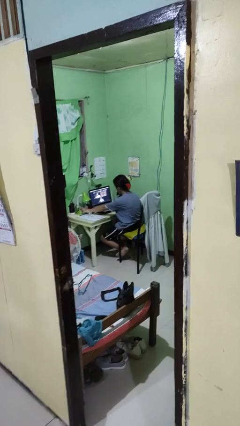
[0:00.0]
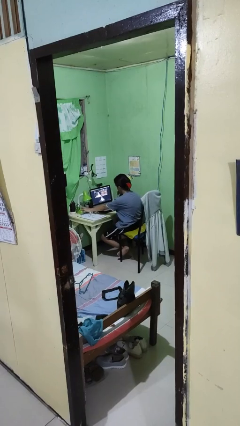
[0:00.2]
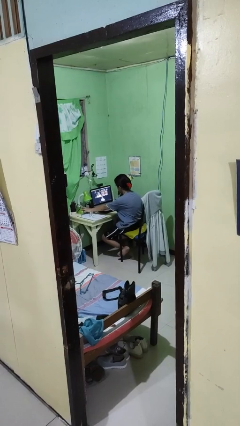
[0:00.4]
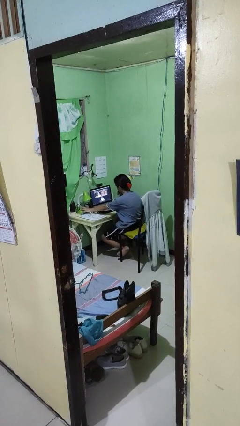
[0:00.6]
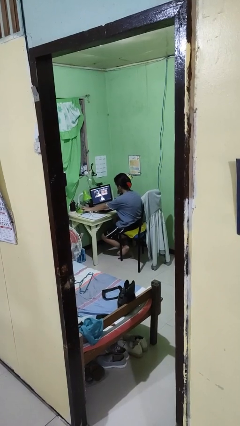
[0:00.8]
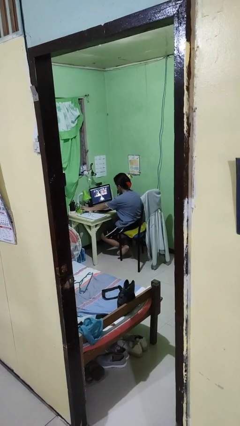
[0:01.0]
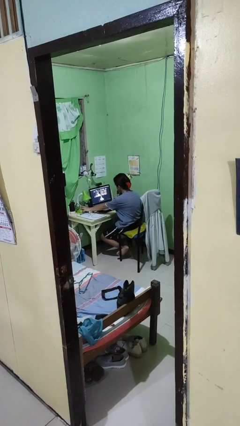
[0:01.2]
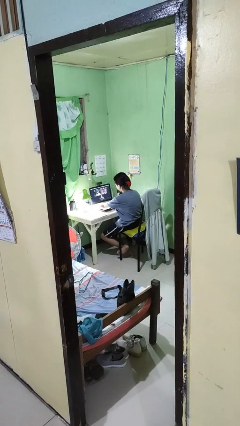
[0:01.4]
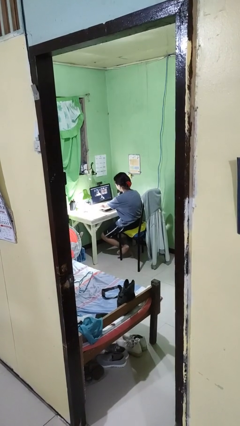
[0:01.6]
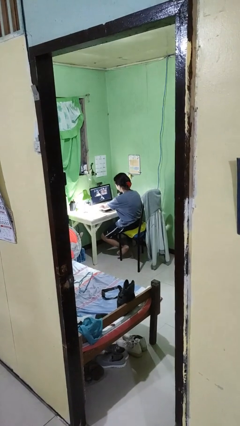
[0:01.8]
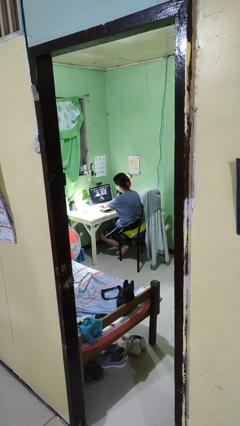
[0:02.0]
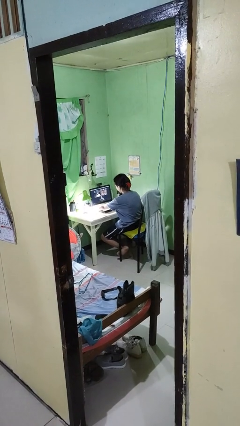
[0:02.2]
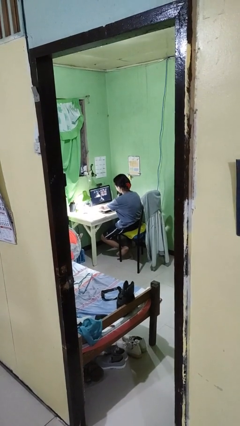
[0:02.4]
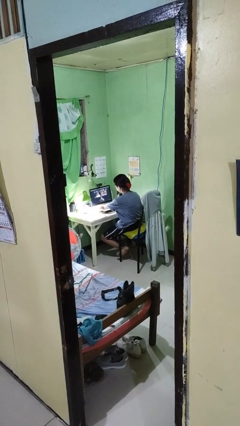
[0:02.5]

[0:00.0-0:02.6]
person turns on lamp

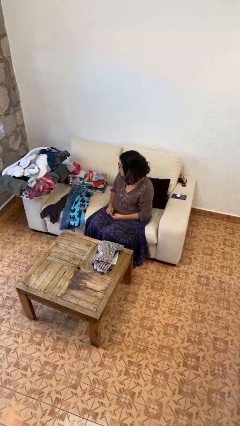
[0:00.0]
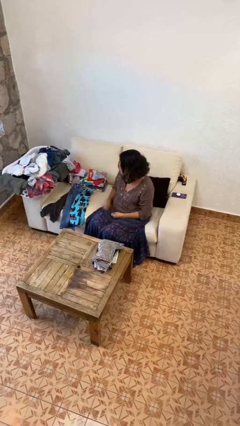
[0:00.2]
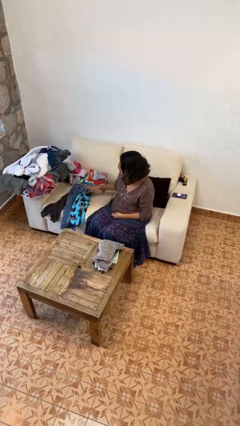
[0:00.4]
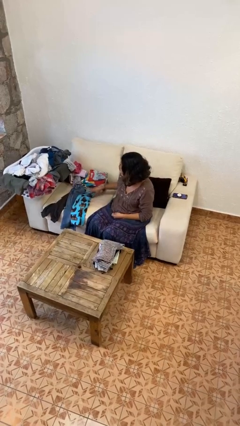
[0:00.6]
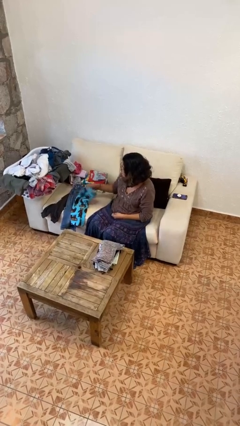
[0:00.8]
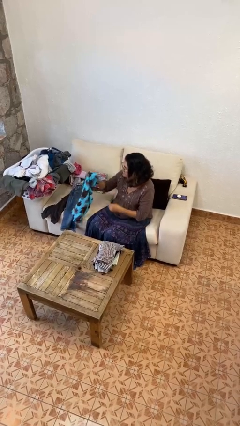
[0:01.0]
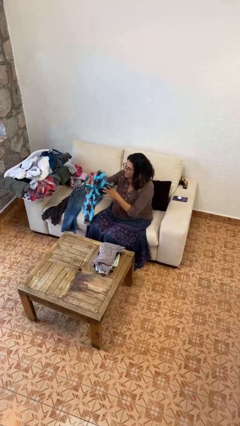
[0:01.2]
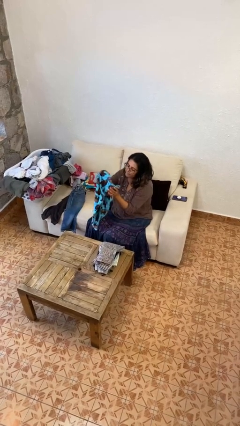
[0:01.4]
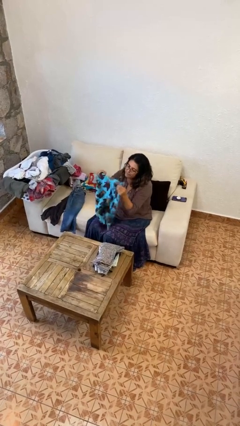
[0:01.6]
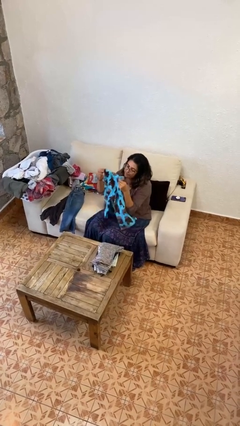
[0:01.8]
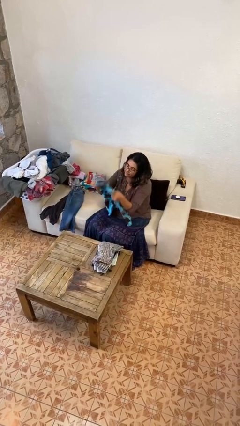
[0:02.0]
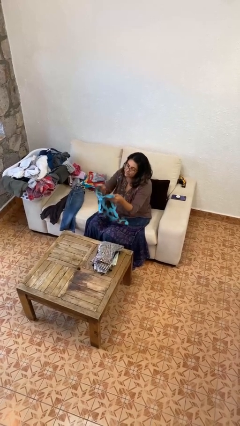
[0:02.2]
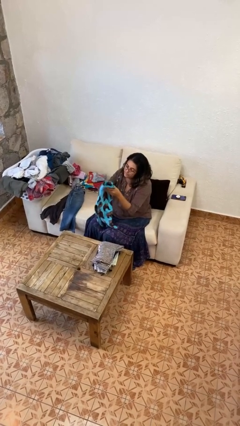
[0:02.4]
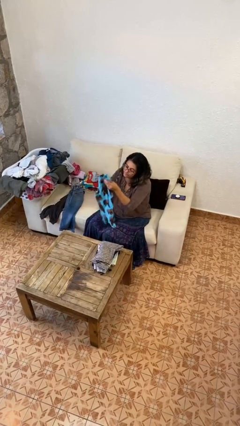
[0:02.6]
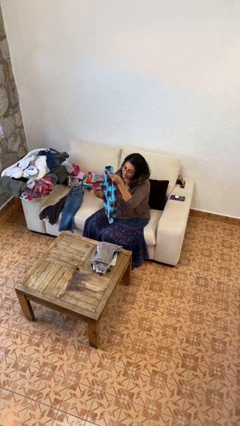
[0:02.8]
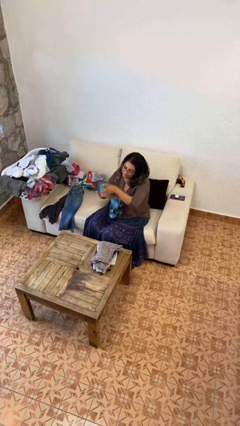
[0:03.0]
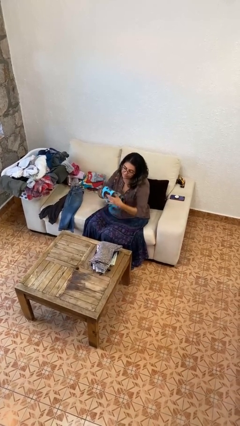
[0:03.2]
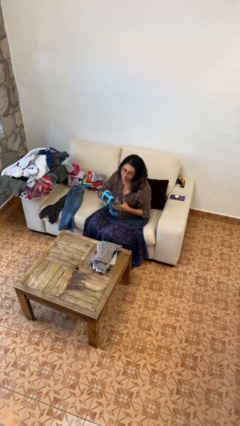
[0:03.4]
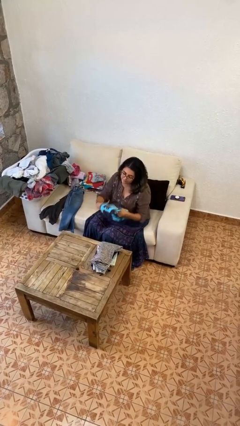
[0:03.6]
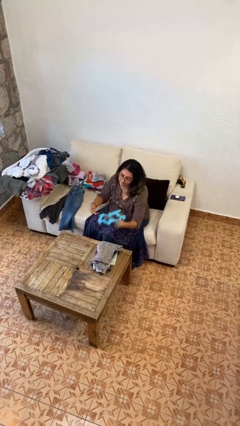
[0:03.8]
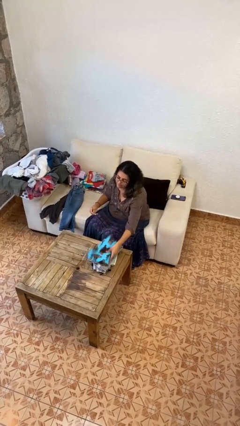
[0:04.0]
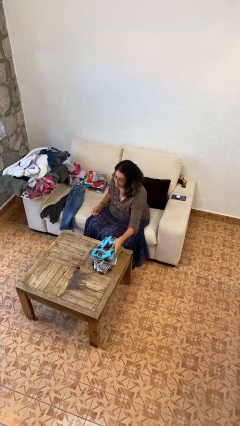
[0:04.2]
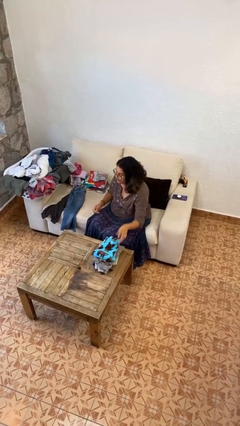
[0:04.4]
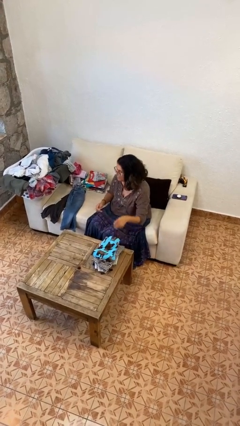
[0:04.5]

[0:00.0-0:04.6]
person folds pants

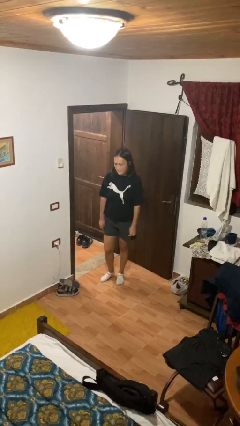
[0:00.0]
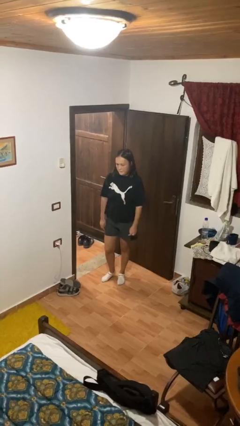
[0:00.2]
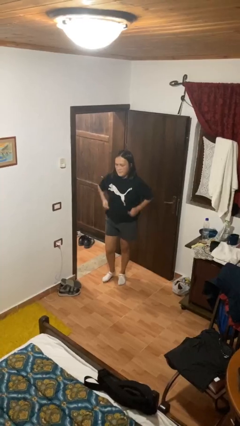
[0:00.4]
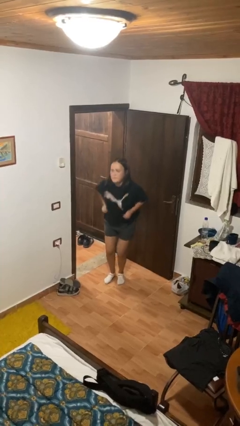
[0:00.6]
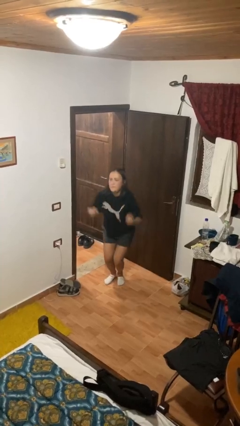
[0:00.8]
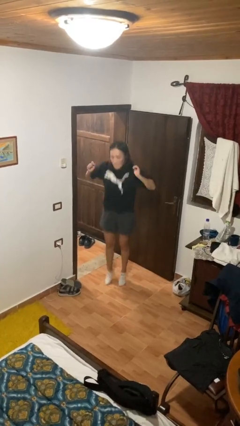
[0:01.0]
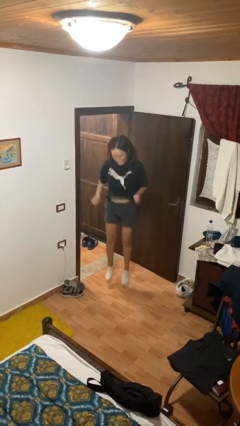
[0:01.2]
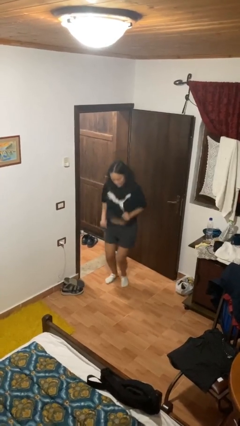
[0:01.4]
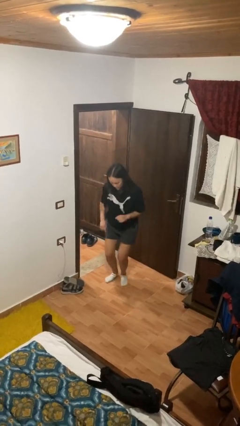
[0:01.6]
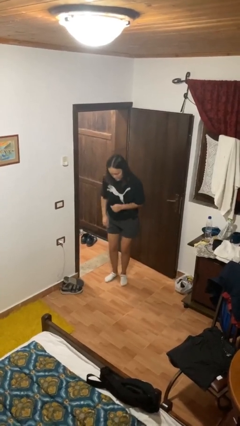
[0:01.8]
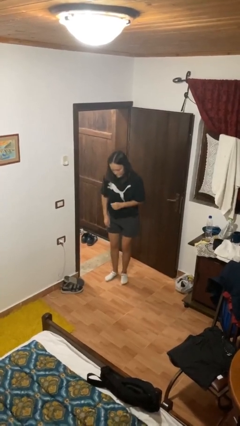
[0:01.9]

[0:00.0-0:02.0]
person jumps

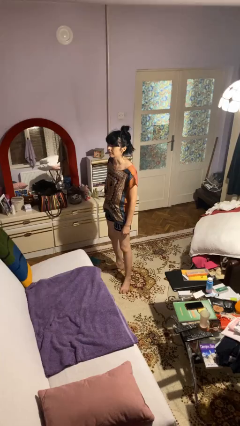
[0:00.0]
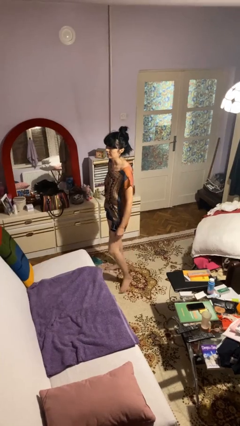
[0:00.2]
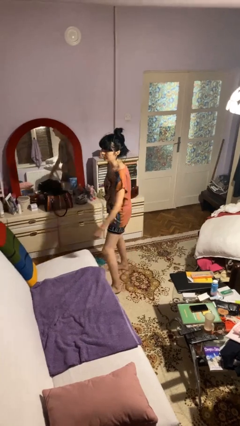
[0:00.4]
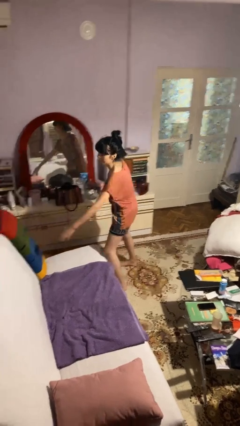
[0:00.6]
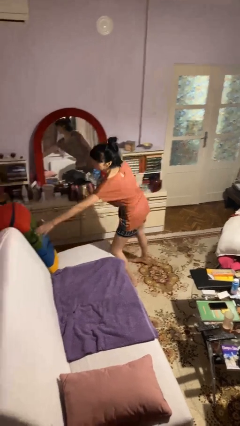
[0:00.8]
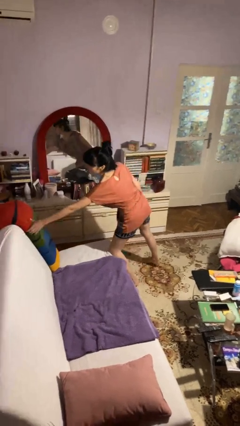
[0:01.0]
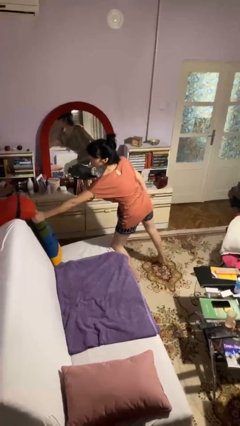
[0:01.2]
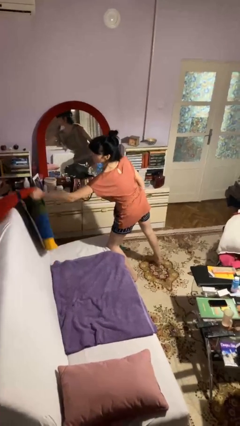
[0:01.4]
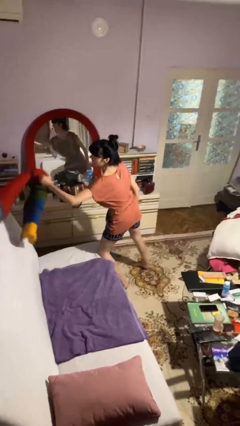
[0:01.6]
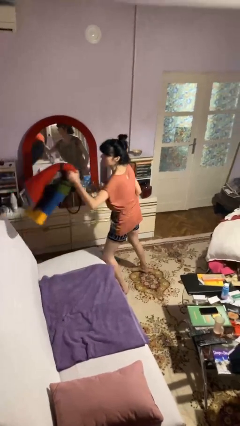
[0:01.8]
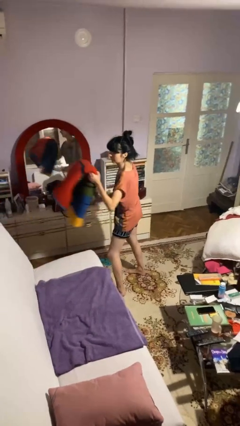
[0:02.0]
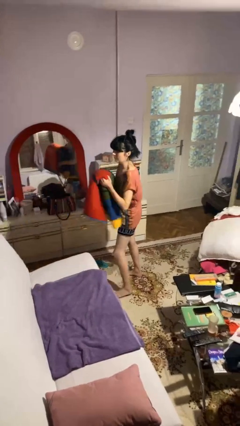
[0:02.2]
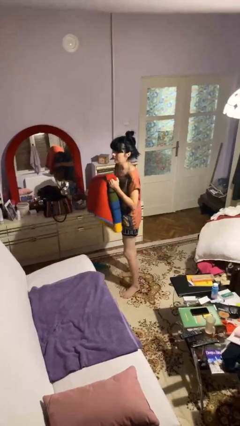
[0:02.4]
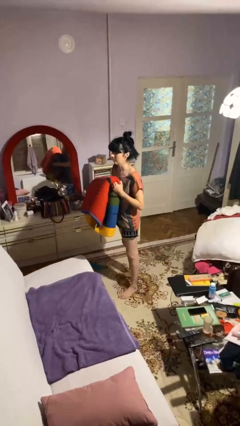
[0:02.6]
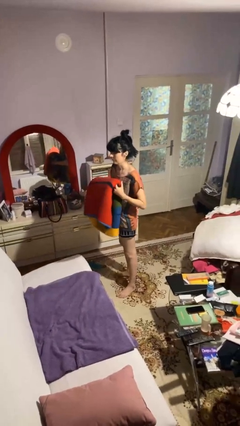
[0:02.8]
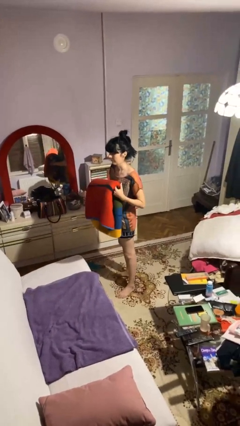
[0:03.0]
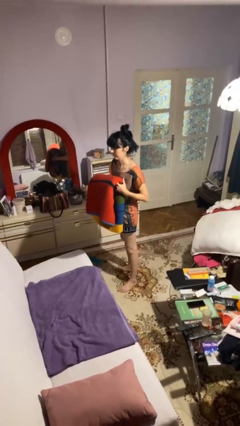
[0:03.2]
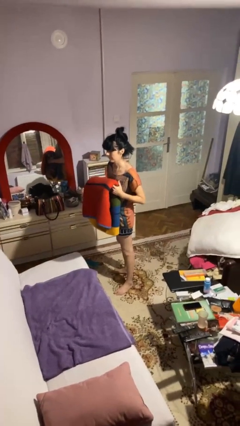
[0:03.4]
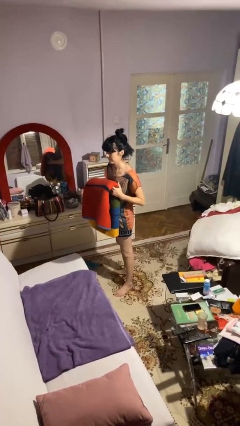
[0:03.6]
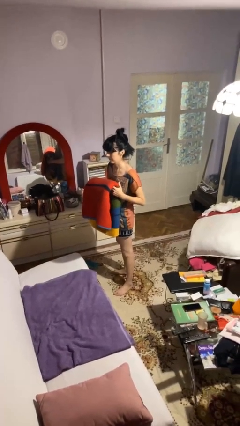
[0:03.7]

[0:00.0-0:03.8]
person picks up object from couch

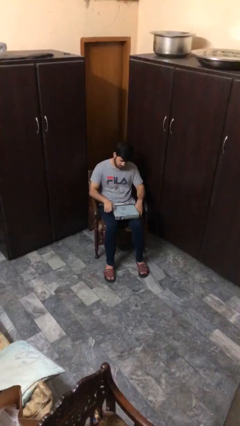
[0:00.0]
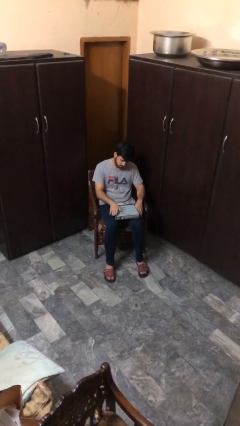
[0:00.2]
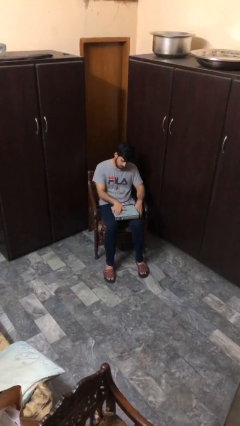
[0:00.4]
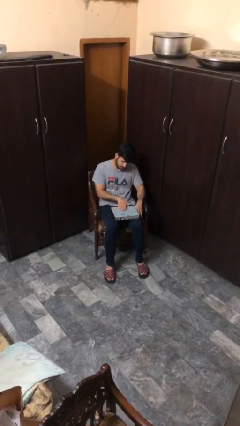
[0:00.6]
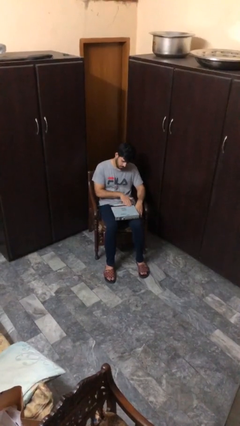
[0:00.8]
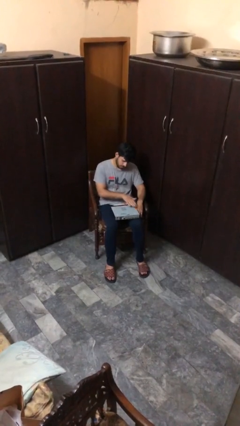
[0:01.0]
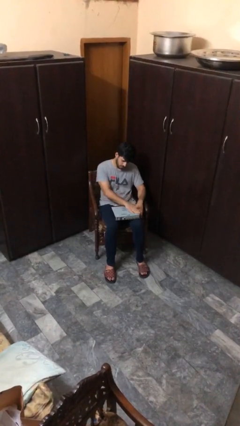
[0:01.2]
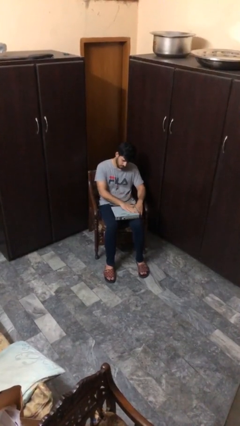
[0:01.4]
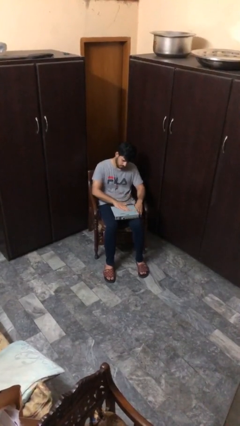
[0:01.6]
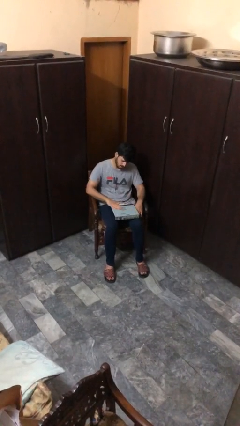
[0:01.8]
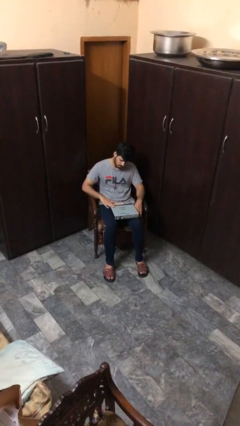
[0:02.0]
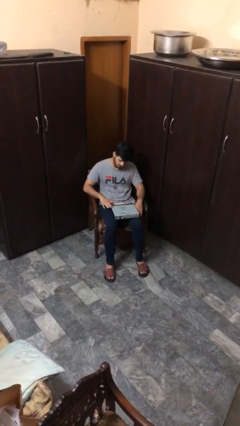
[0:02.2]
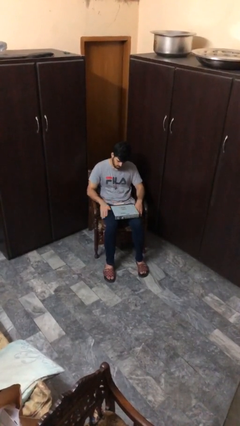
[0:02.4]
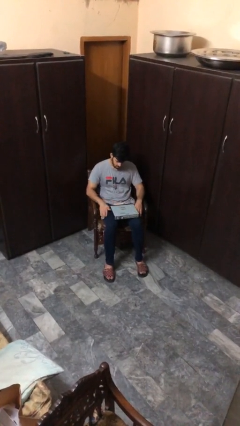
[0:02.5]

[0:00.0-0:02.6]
person waves hand over object

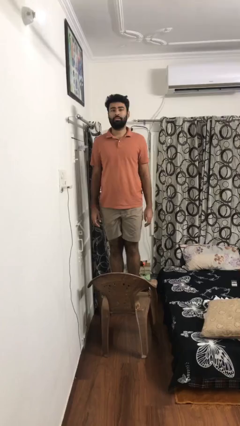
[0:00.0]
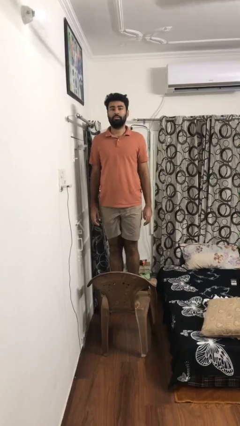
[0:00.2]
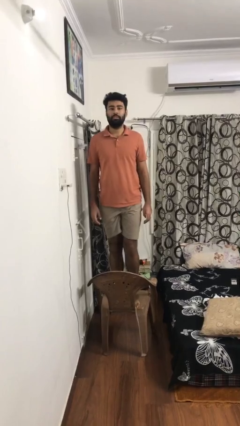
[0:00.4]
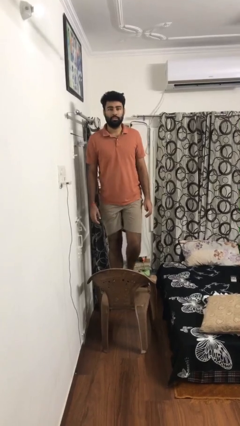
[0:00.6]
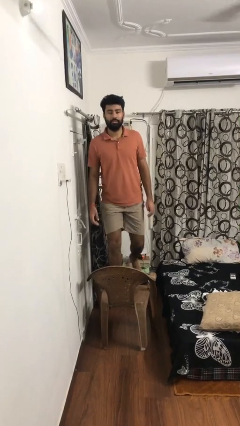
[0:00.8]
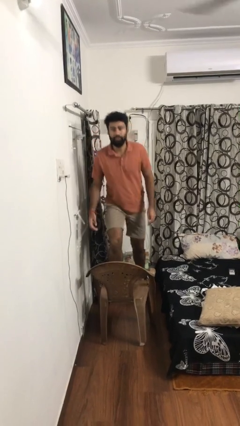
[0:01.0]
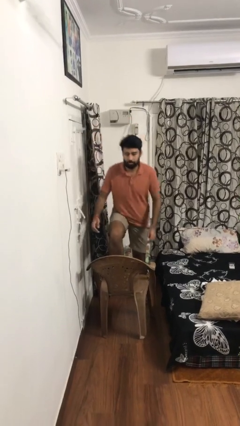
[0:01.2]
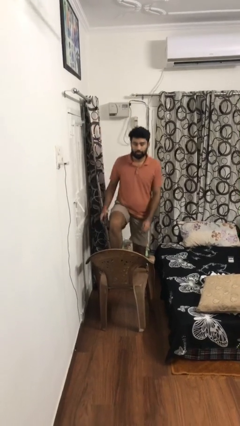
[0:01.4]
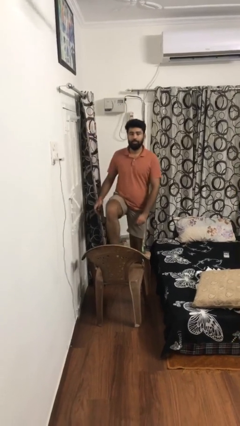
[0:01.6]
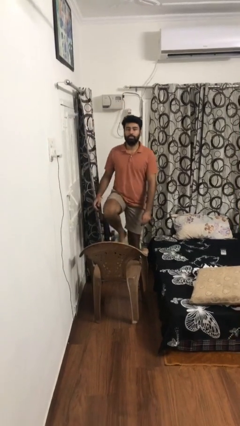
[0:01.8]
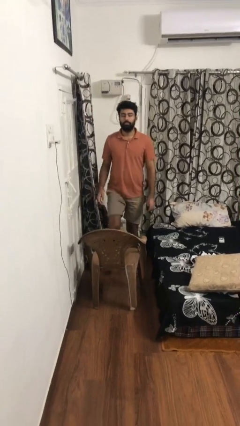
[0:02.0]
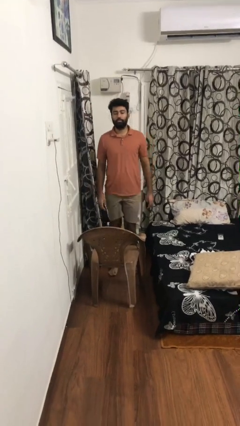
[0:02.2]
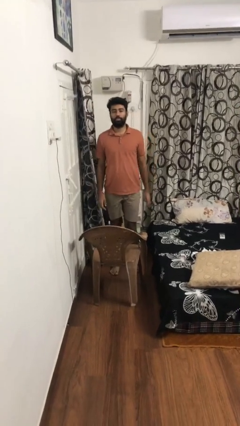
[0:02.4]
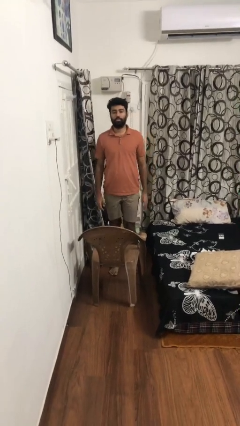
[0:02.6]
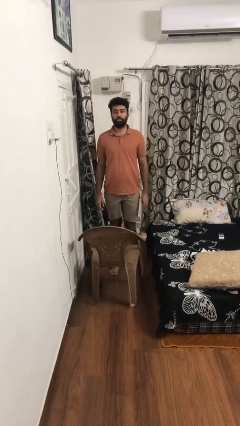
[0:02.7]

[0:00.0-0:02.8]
person climbs off chair
